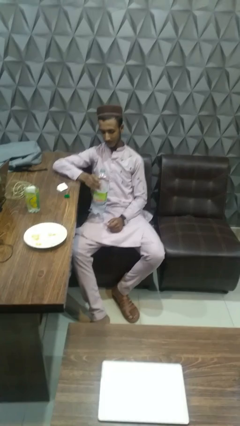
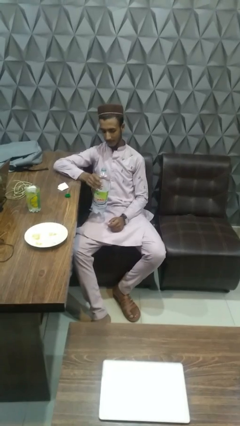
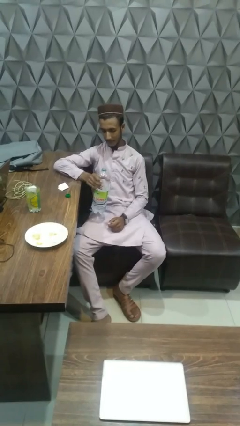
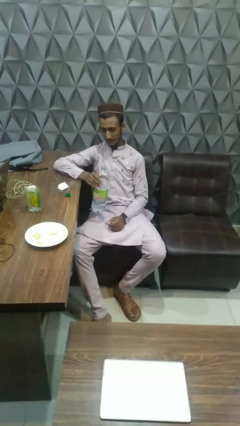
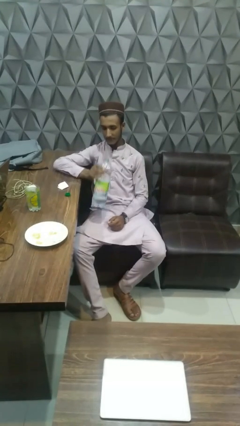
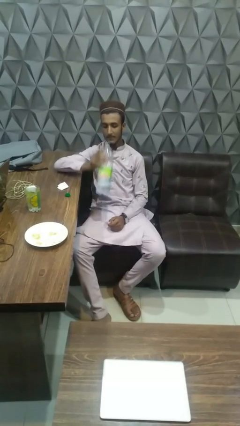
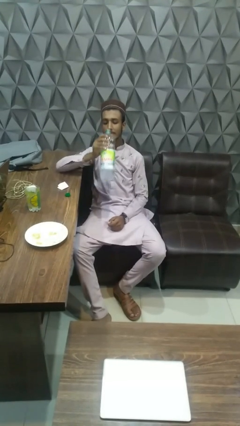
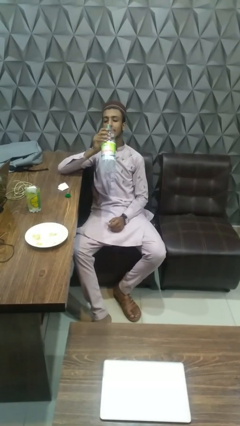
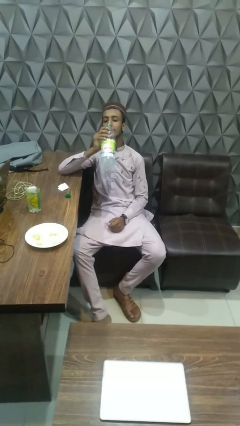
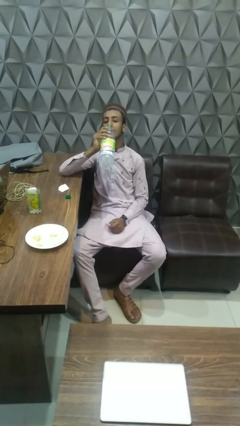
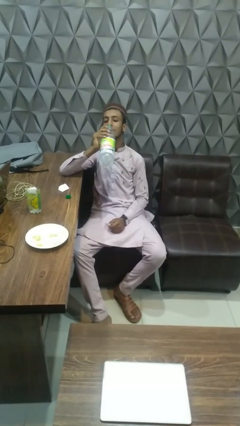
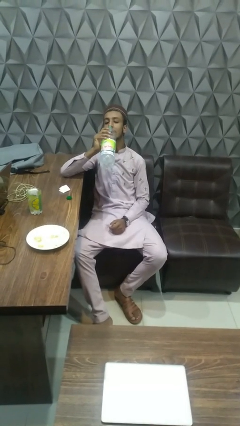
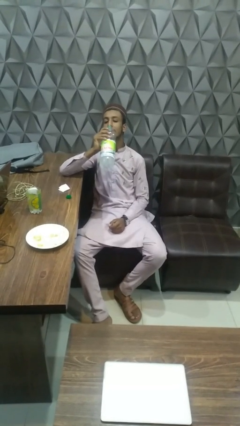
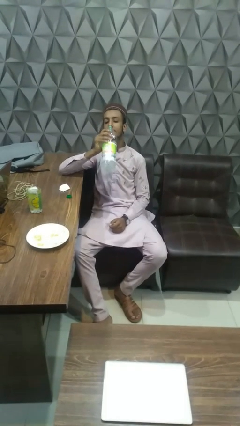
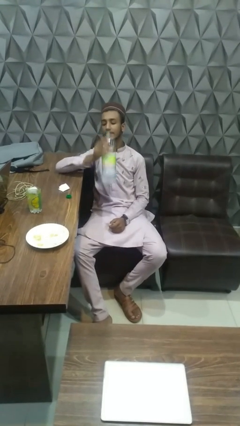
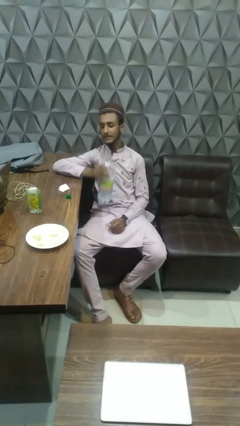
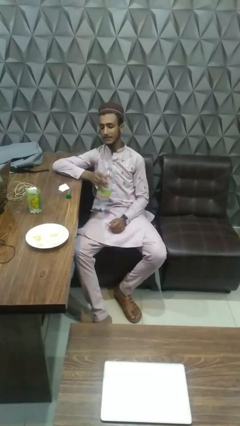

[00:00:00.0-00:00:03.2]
person drinks from bottle

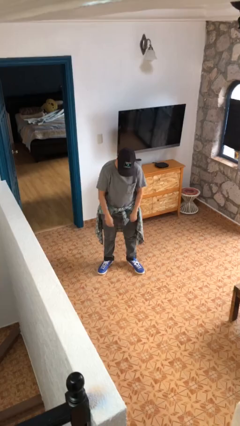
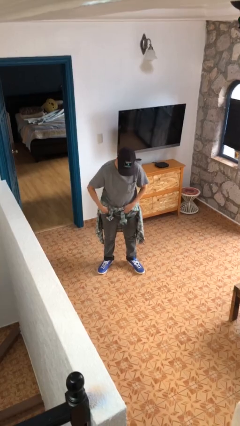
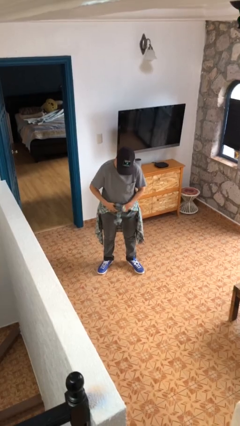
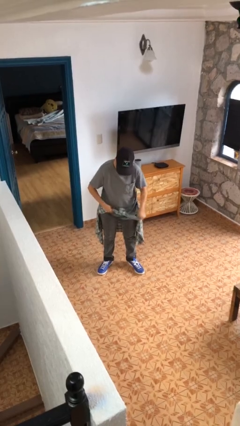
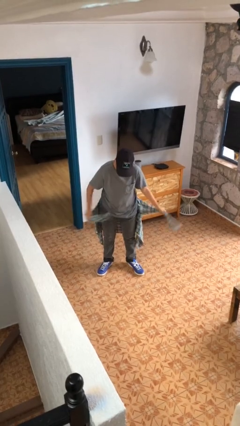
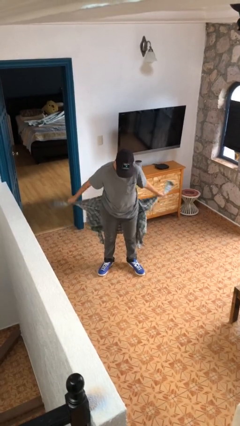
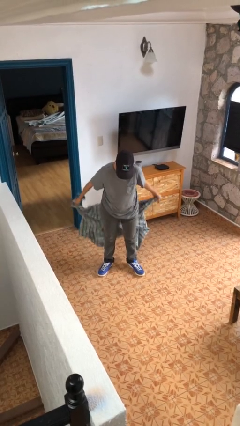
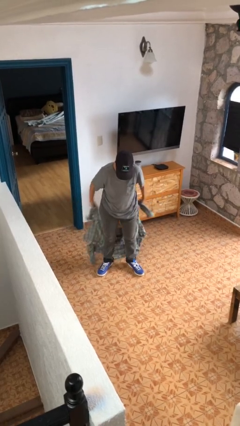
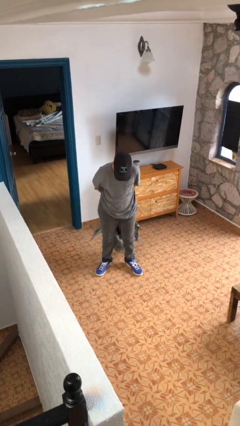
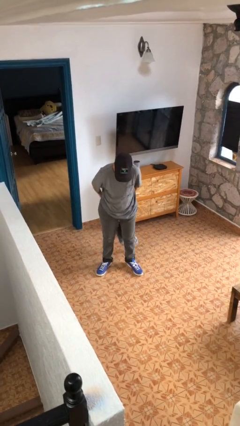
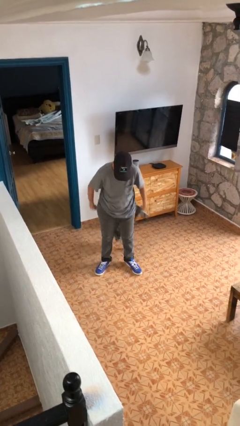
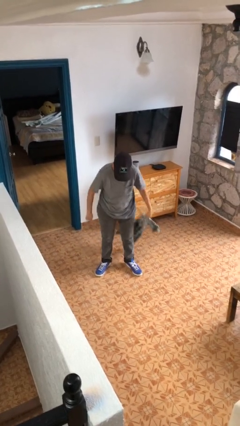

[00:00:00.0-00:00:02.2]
person unties jacket around waist

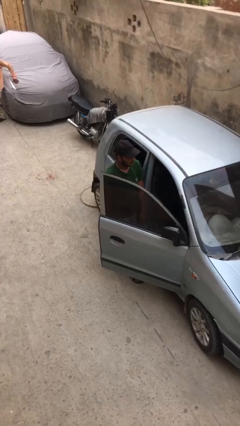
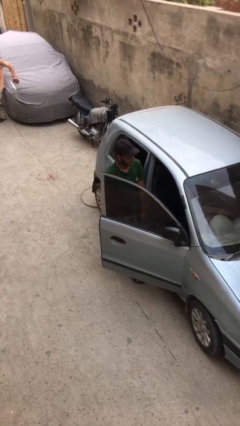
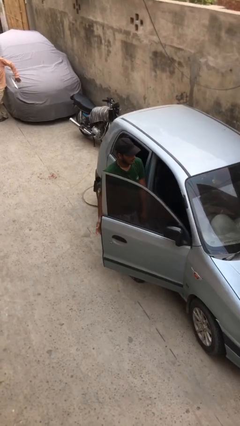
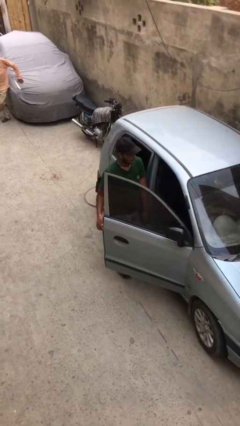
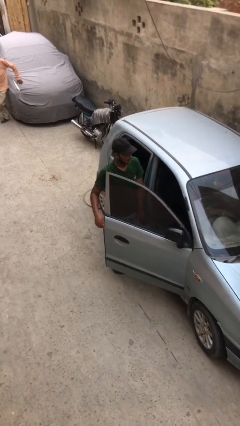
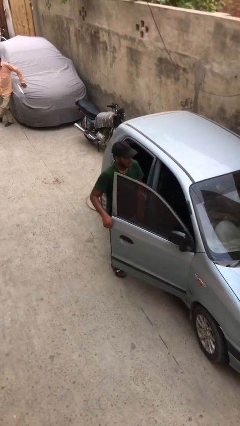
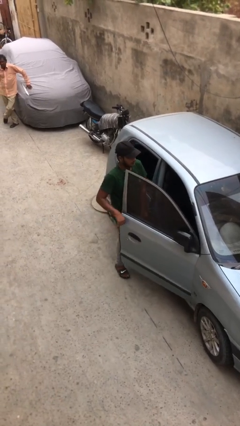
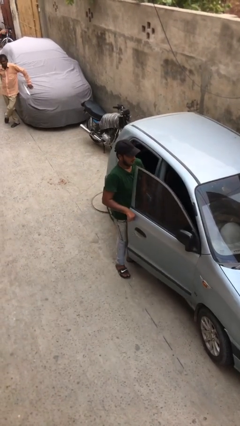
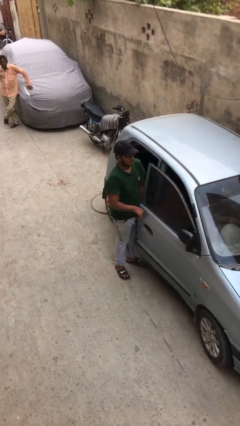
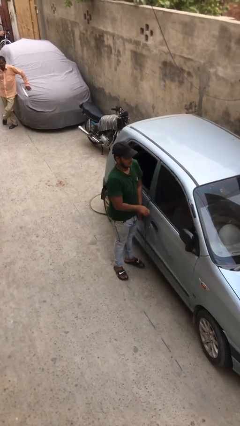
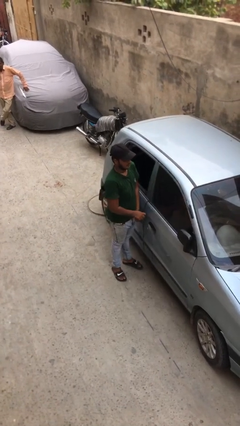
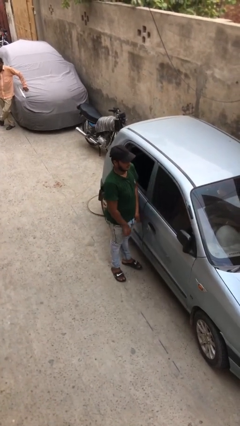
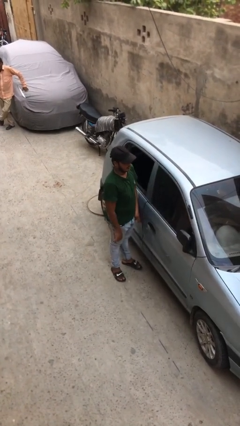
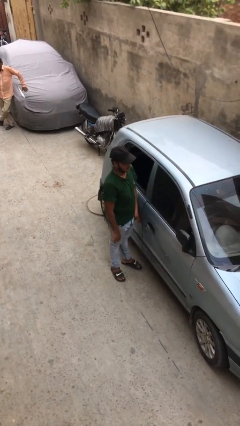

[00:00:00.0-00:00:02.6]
person closes car door

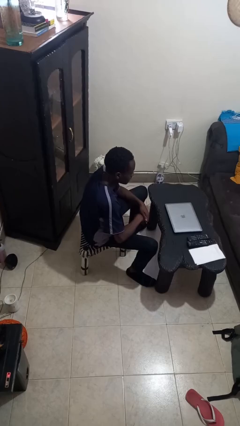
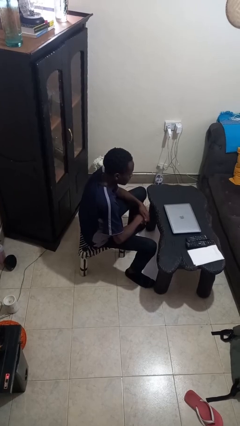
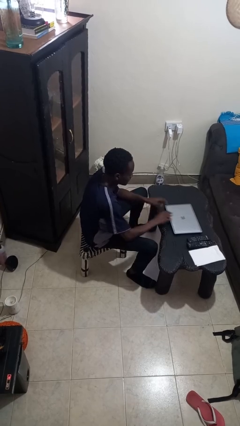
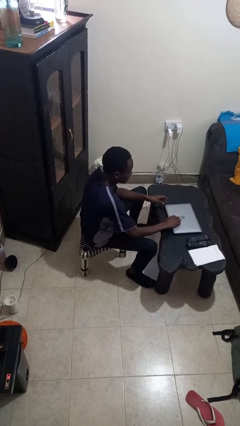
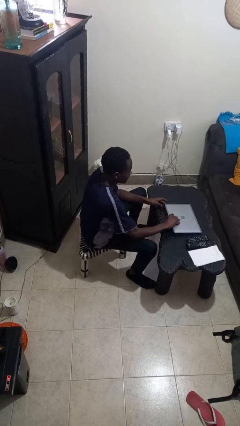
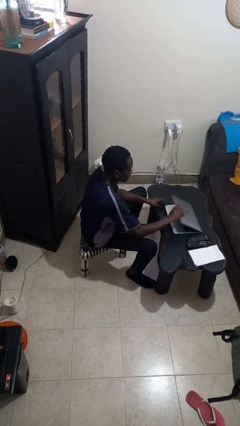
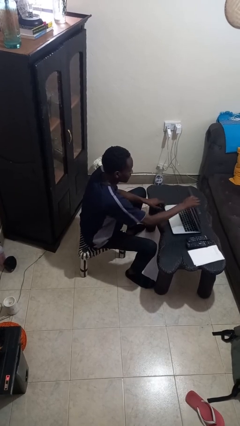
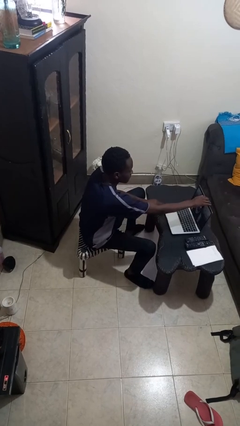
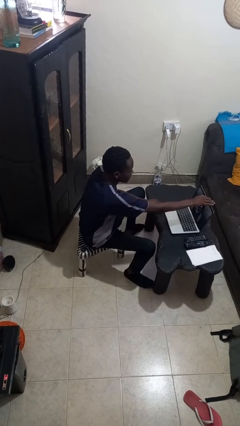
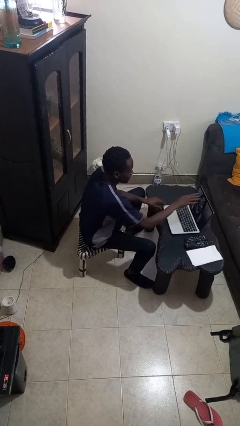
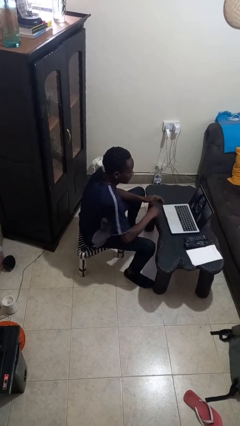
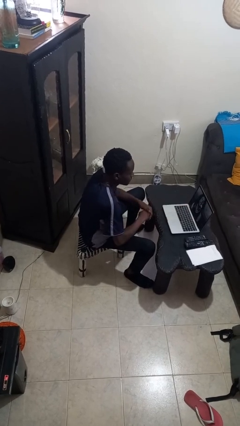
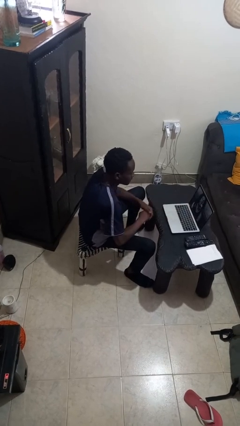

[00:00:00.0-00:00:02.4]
person opens laptop

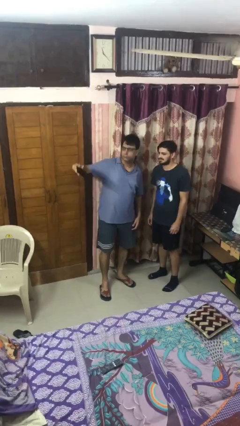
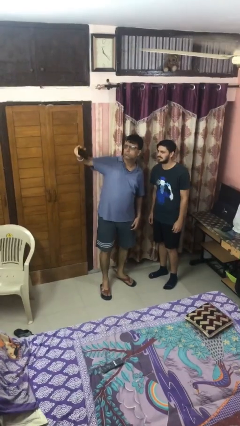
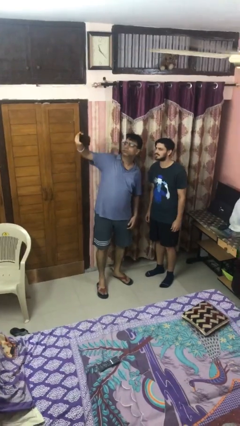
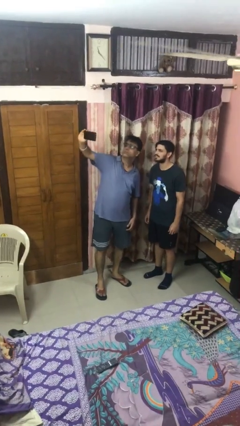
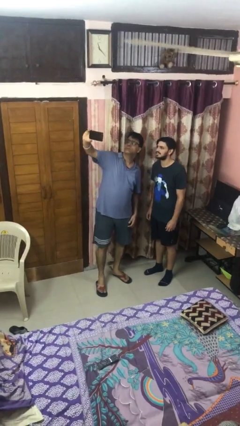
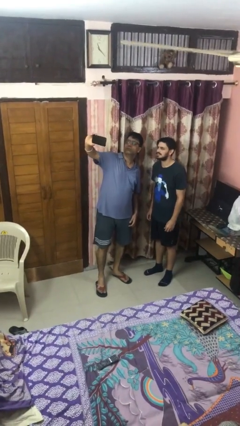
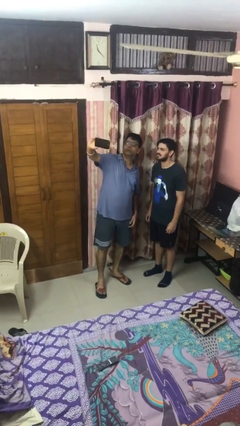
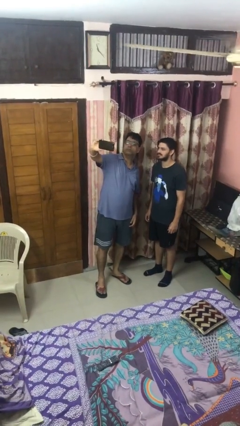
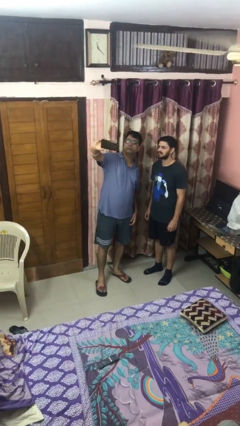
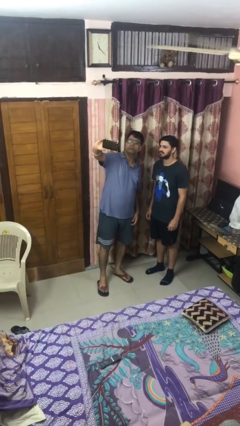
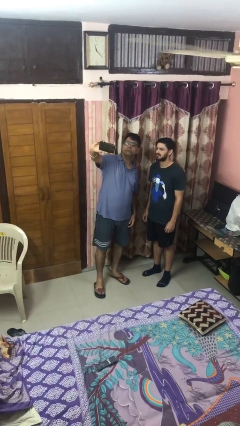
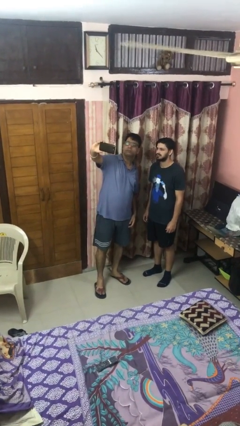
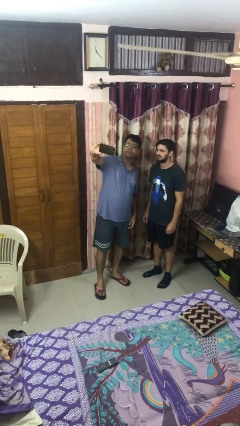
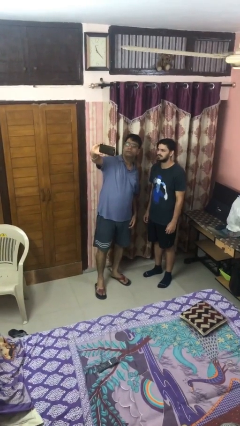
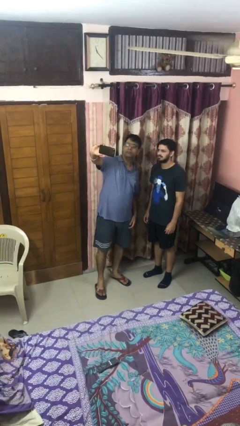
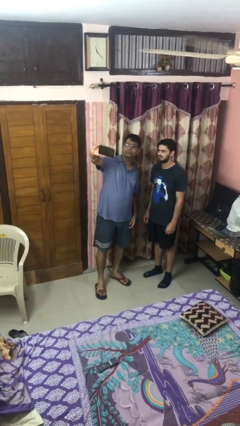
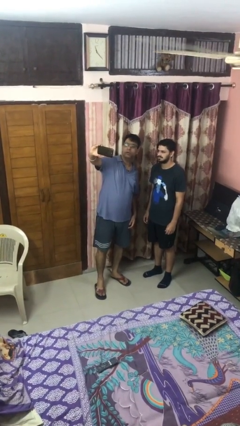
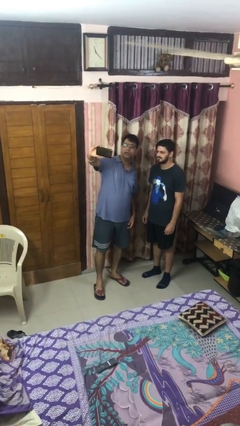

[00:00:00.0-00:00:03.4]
person takes selfie with person

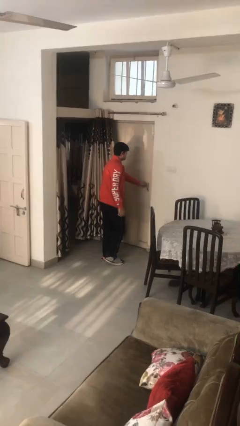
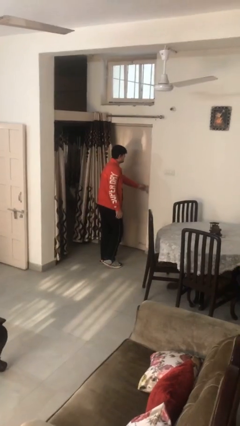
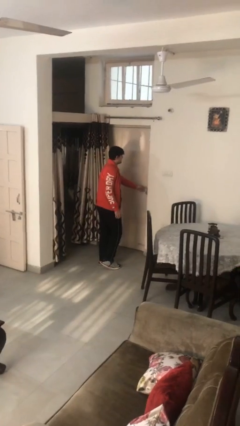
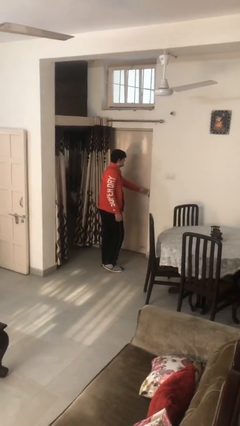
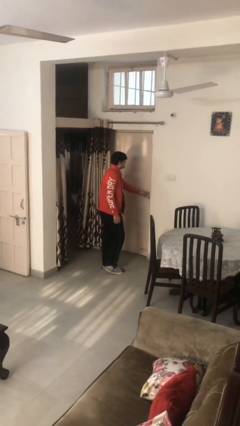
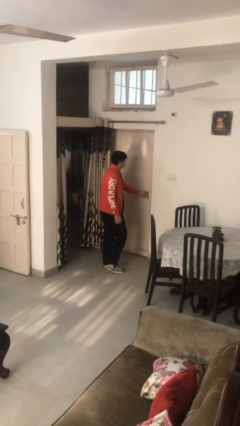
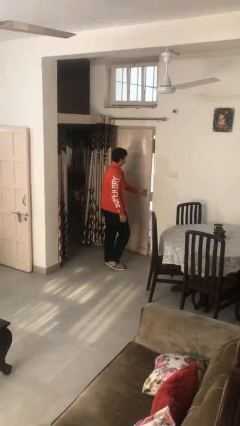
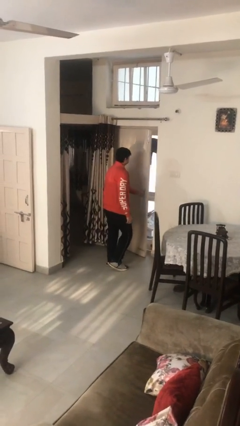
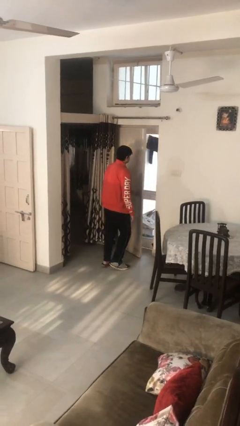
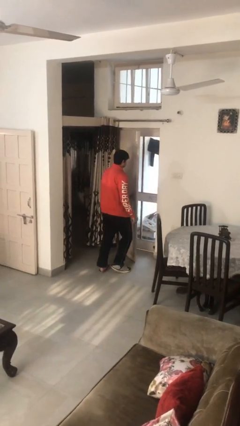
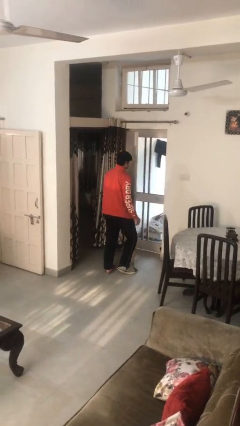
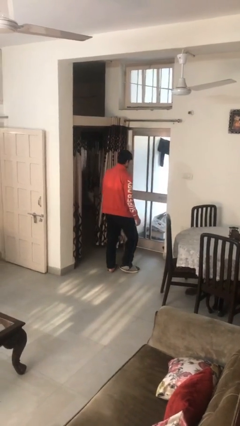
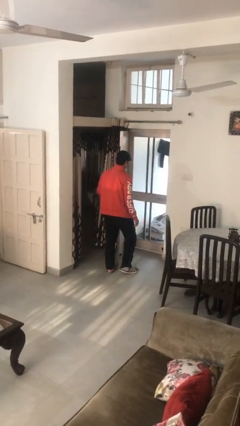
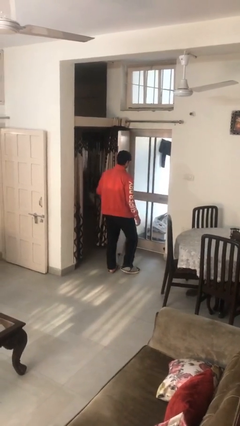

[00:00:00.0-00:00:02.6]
person opens facility door

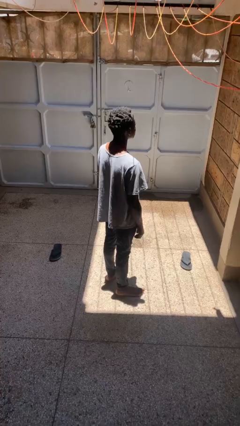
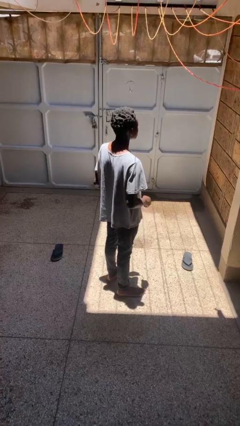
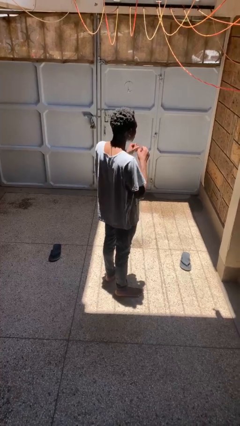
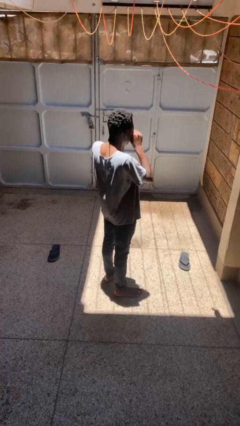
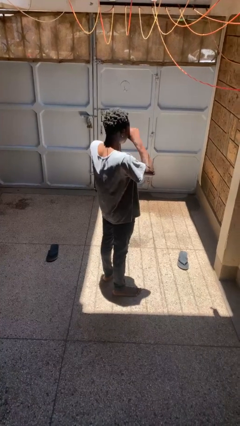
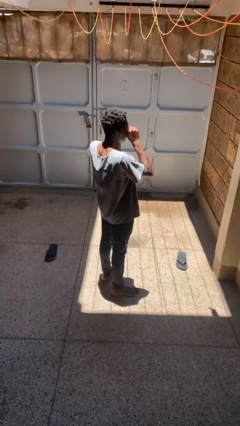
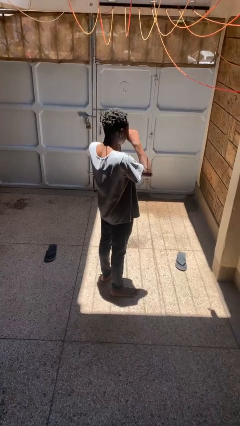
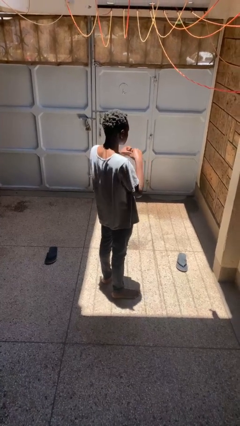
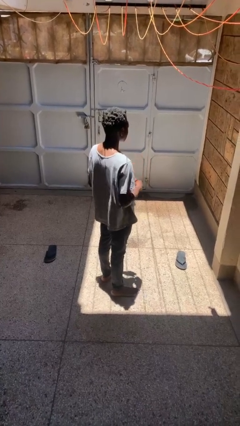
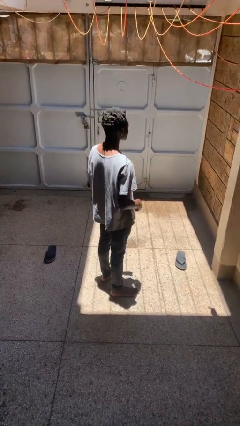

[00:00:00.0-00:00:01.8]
person rubs eyes
